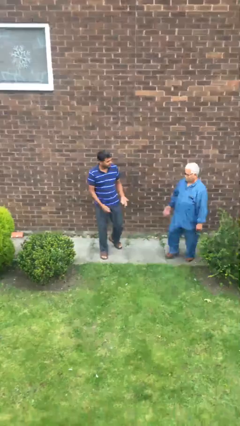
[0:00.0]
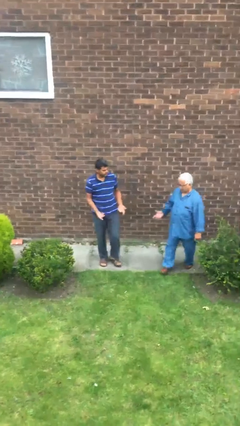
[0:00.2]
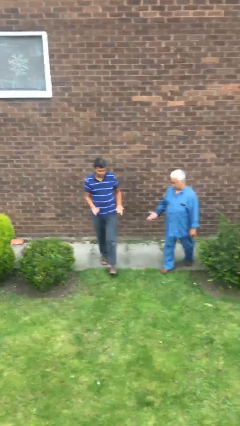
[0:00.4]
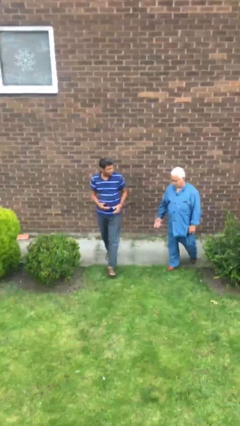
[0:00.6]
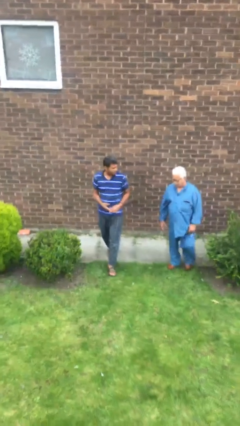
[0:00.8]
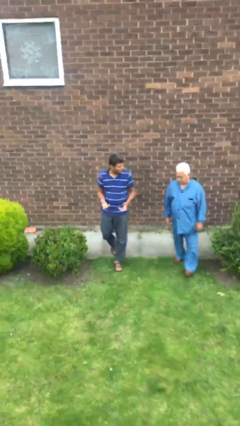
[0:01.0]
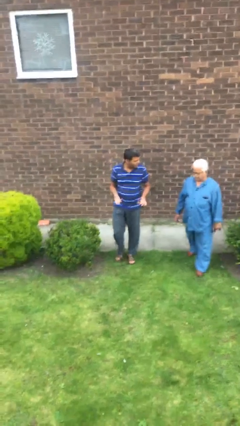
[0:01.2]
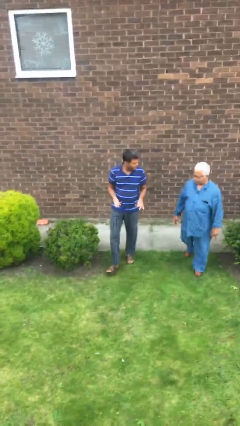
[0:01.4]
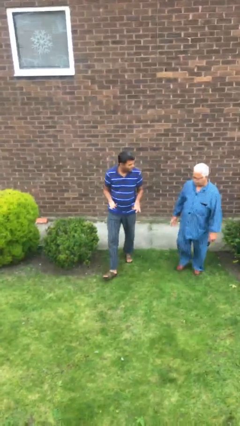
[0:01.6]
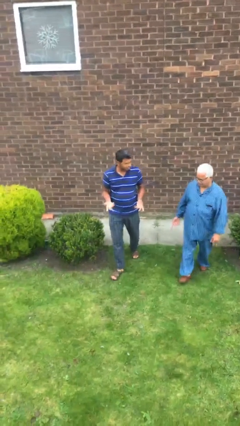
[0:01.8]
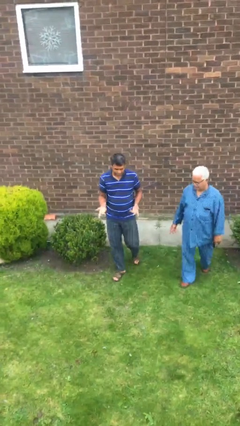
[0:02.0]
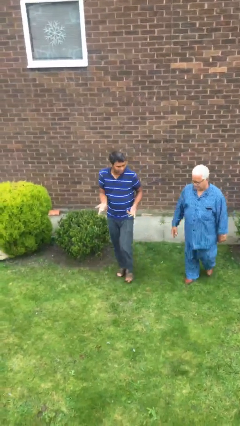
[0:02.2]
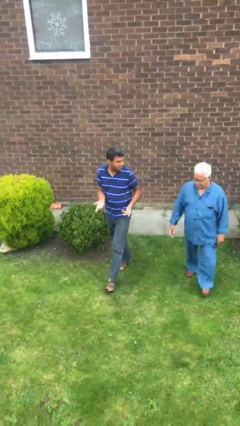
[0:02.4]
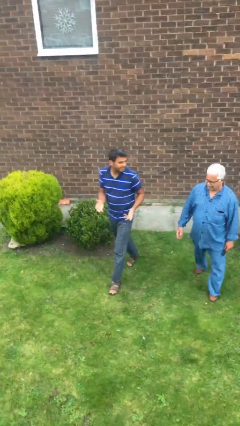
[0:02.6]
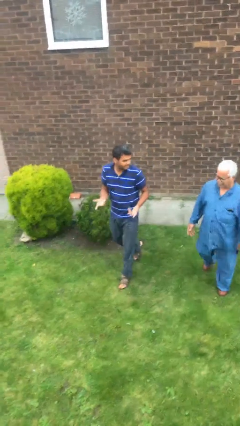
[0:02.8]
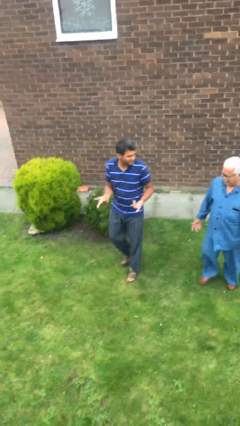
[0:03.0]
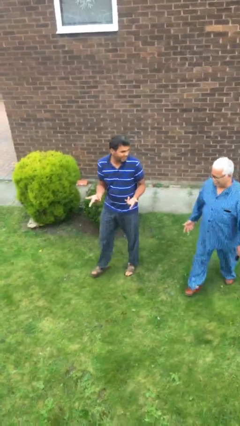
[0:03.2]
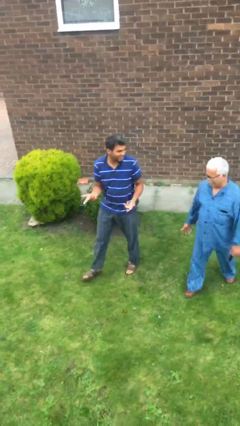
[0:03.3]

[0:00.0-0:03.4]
person talks to person

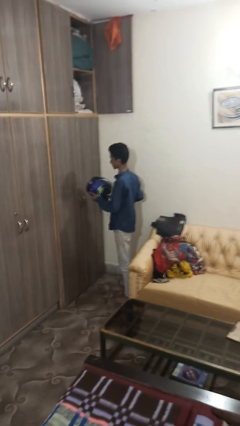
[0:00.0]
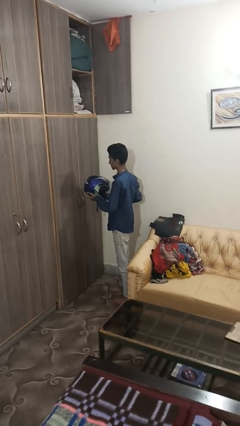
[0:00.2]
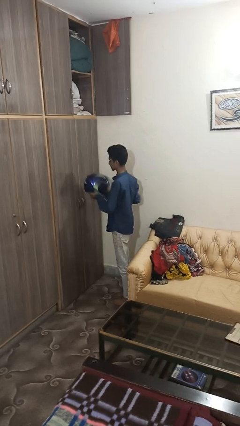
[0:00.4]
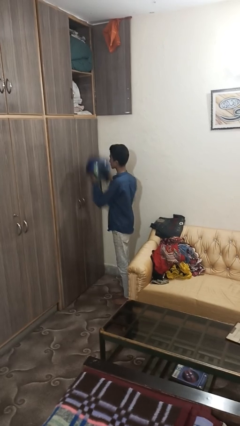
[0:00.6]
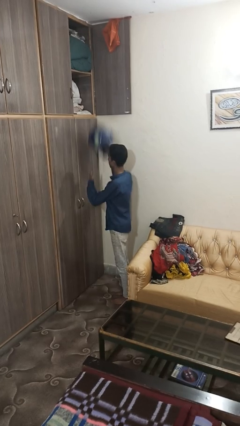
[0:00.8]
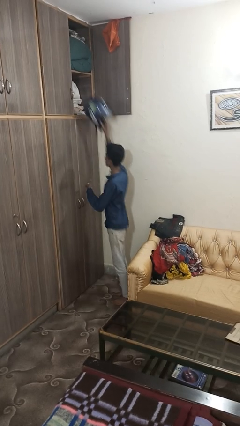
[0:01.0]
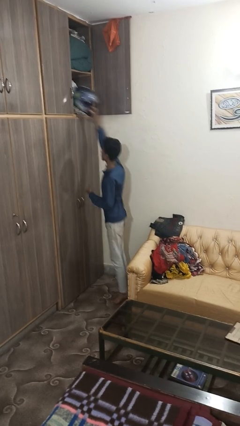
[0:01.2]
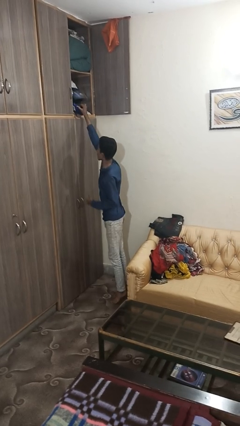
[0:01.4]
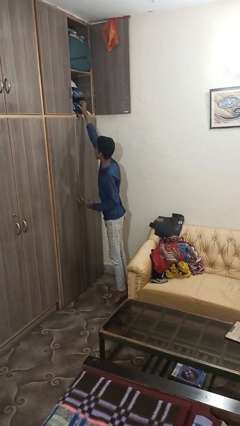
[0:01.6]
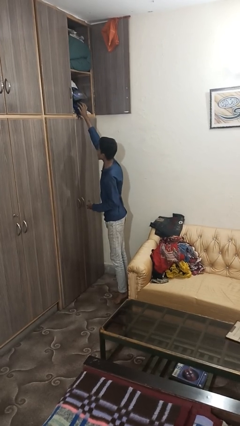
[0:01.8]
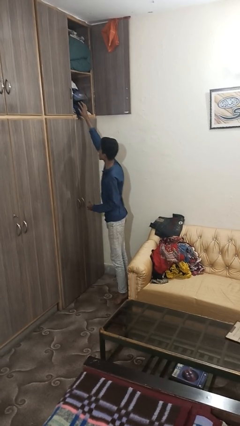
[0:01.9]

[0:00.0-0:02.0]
person puts down object on shelf

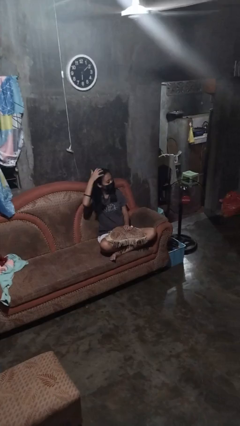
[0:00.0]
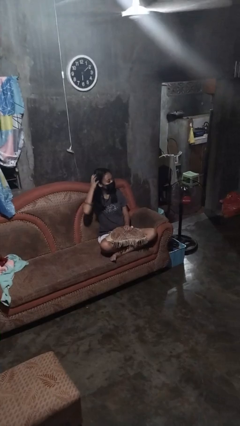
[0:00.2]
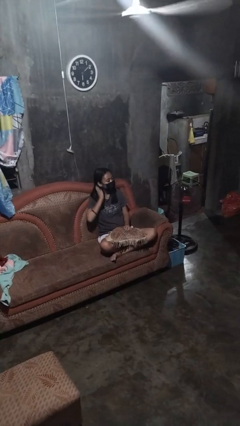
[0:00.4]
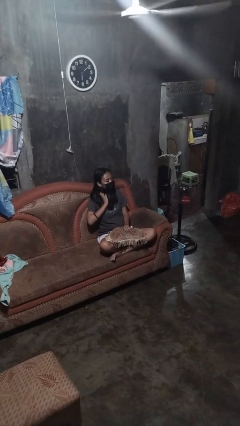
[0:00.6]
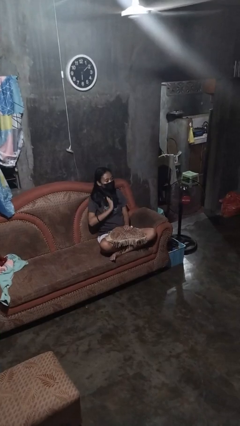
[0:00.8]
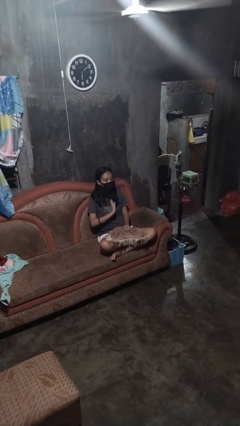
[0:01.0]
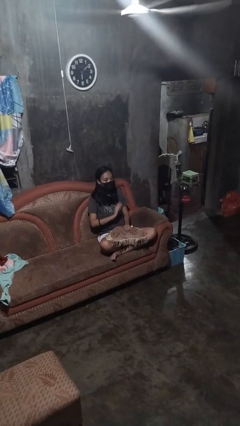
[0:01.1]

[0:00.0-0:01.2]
person strokes hair

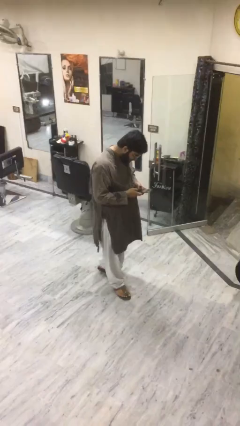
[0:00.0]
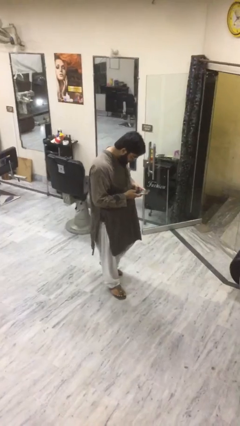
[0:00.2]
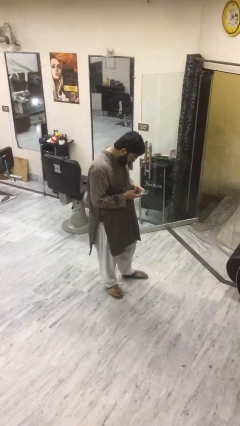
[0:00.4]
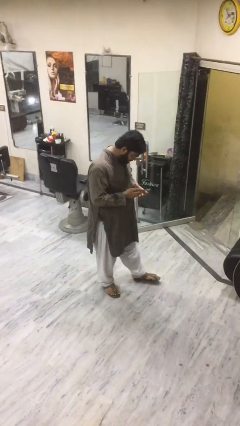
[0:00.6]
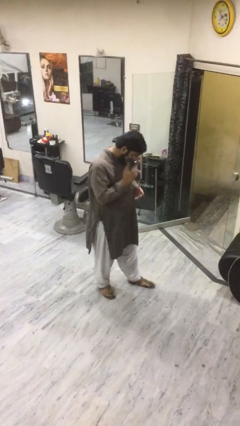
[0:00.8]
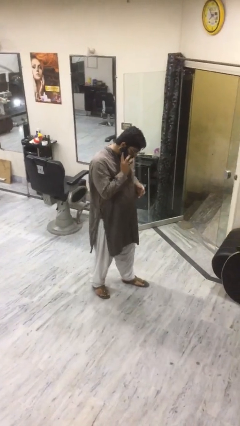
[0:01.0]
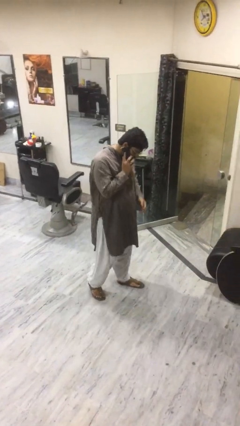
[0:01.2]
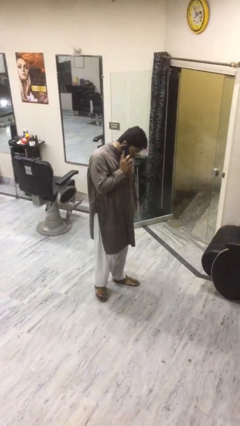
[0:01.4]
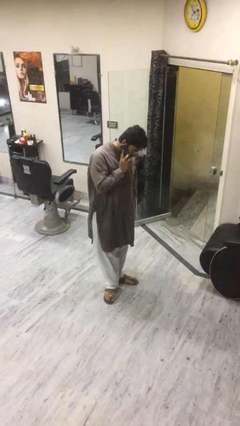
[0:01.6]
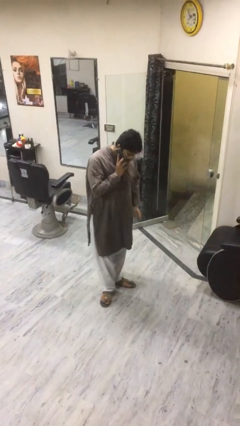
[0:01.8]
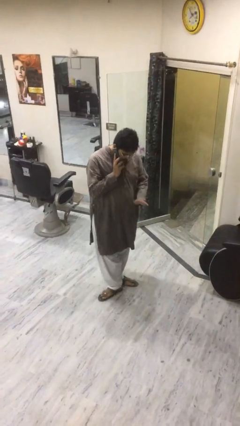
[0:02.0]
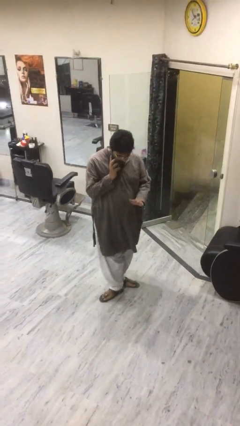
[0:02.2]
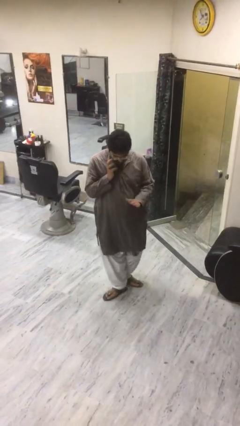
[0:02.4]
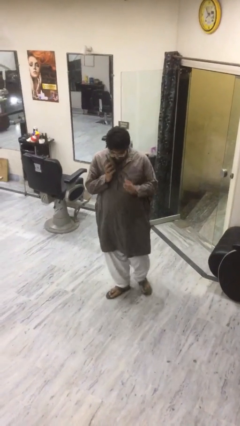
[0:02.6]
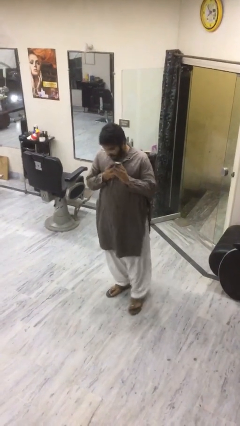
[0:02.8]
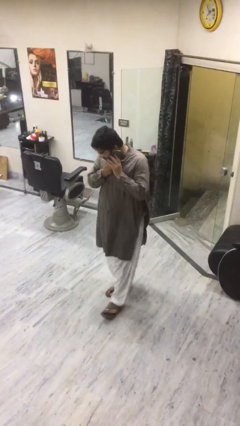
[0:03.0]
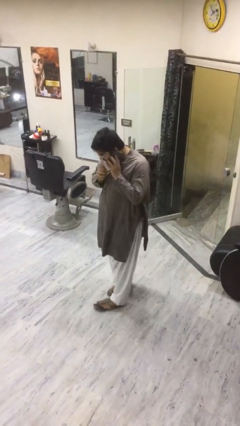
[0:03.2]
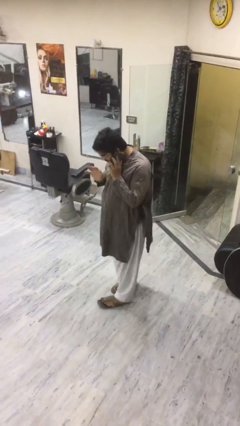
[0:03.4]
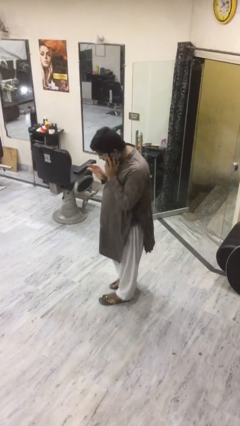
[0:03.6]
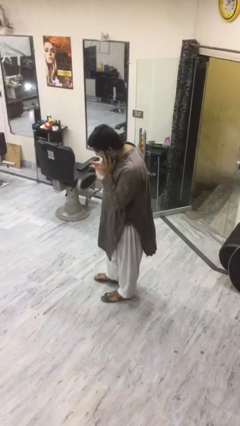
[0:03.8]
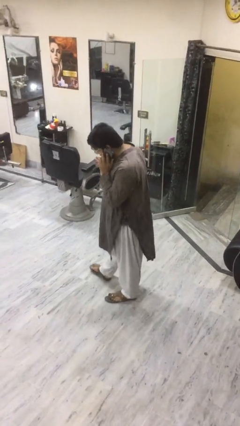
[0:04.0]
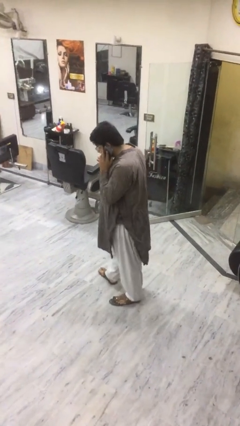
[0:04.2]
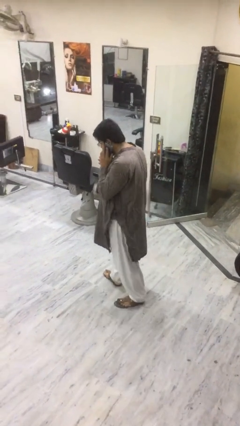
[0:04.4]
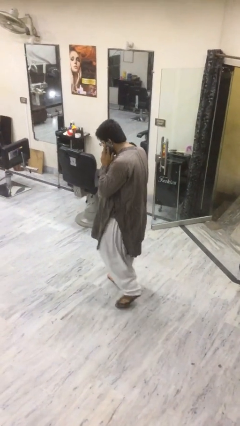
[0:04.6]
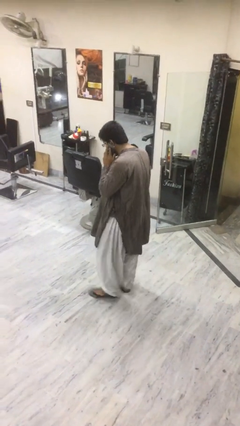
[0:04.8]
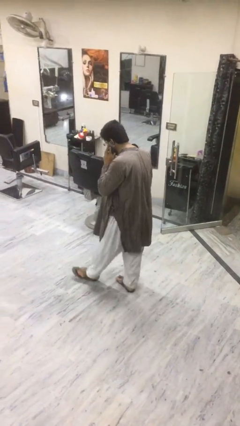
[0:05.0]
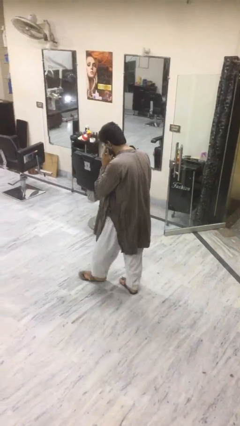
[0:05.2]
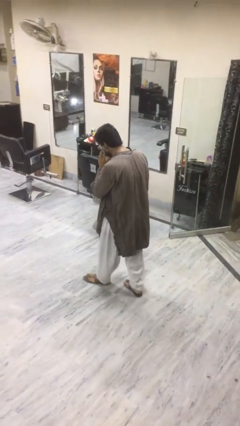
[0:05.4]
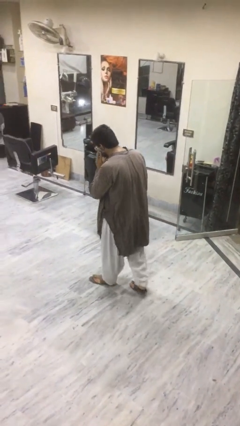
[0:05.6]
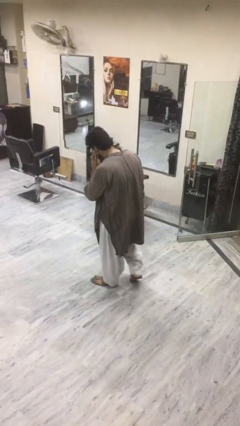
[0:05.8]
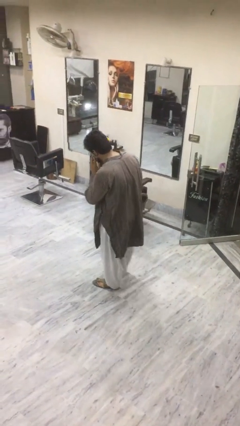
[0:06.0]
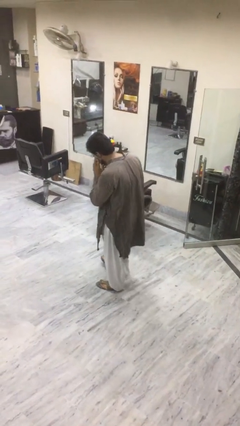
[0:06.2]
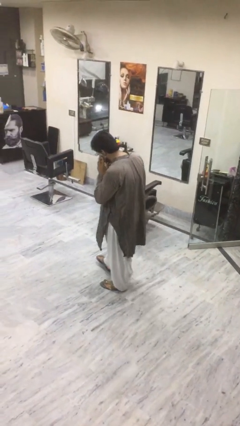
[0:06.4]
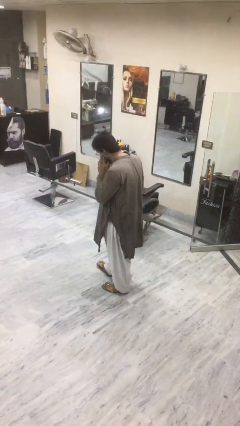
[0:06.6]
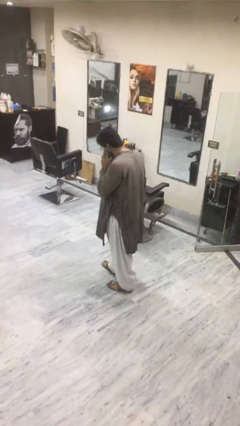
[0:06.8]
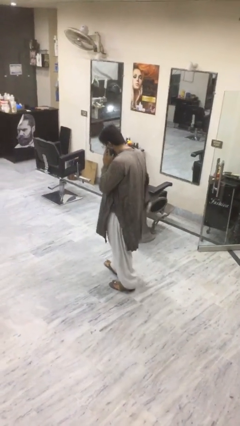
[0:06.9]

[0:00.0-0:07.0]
person talks on phone

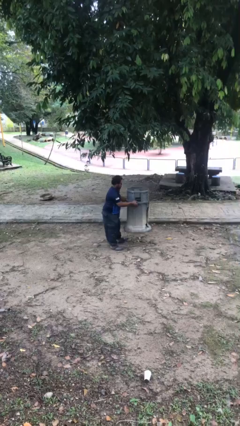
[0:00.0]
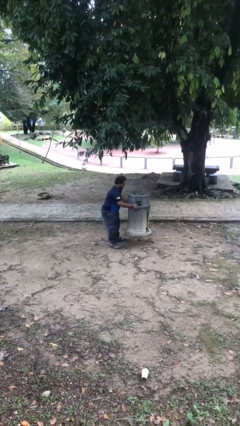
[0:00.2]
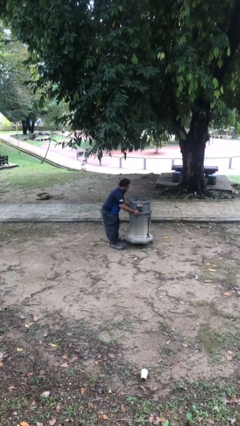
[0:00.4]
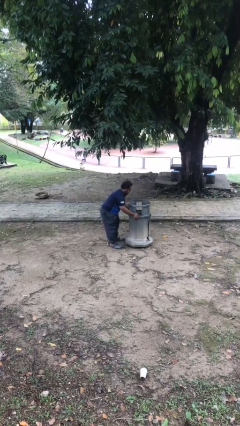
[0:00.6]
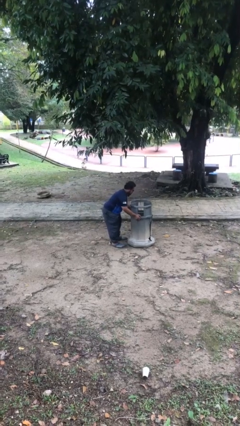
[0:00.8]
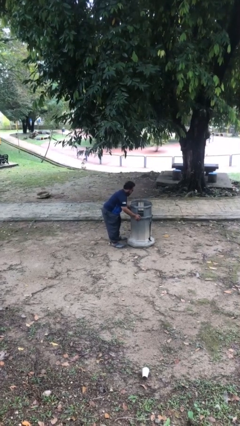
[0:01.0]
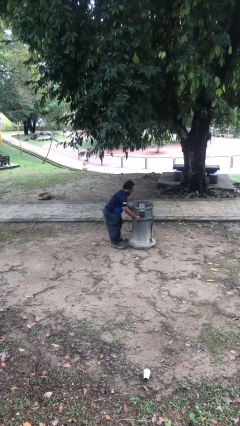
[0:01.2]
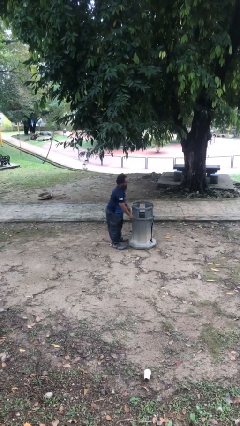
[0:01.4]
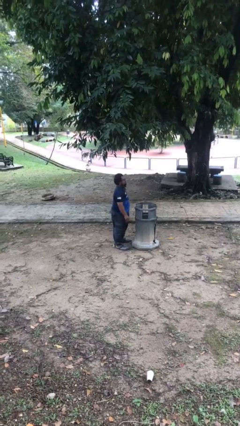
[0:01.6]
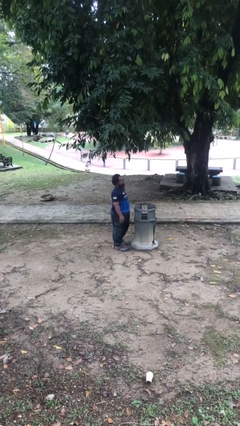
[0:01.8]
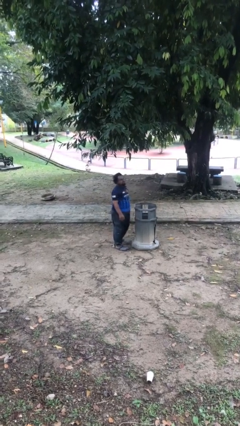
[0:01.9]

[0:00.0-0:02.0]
person puts down object on floor

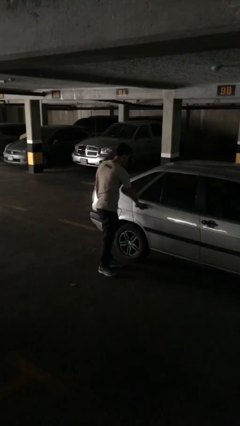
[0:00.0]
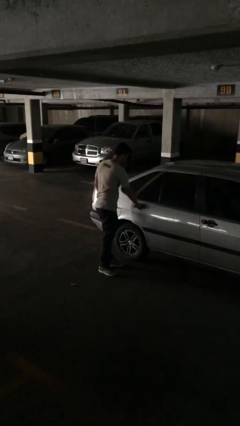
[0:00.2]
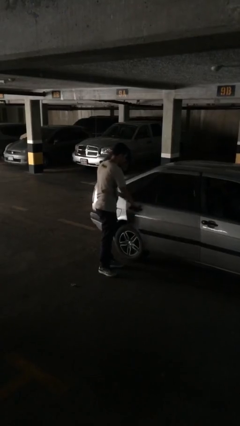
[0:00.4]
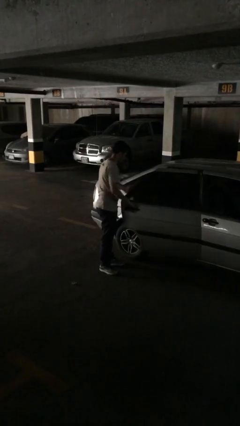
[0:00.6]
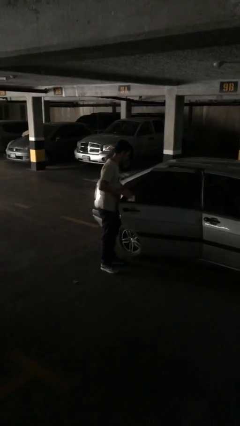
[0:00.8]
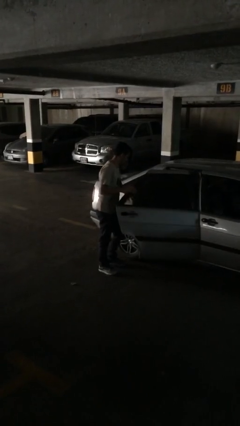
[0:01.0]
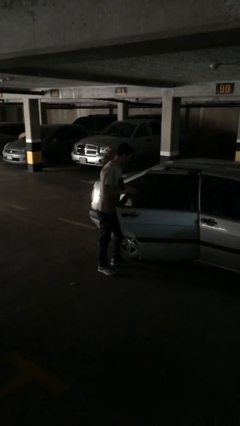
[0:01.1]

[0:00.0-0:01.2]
person opens car door

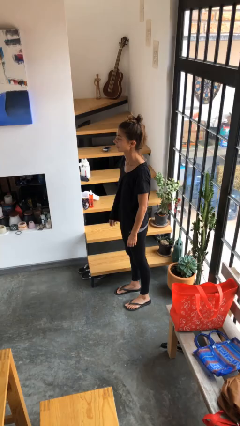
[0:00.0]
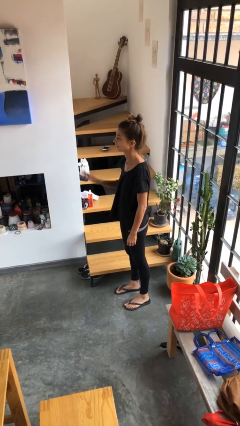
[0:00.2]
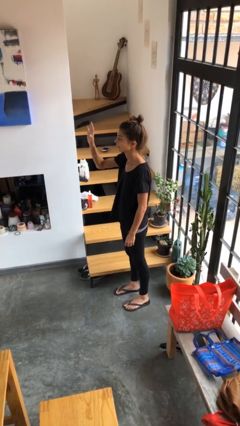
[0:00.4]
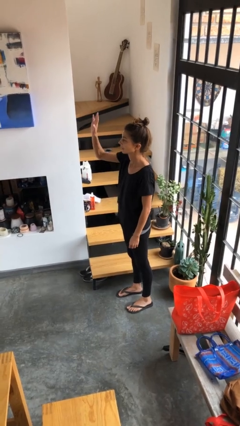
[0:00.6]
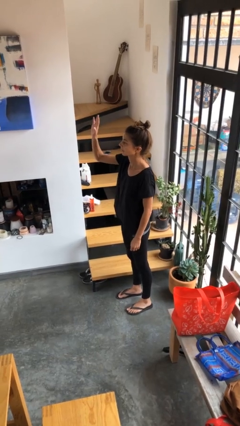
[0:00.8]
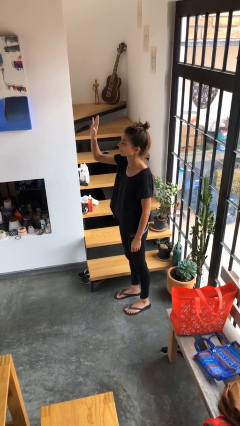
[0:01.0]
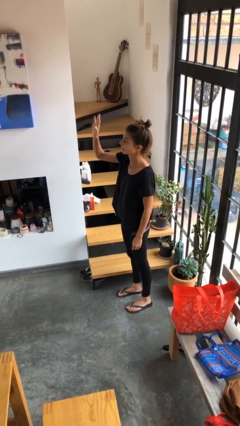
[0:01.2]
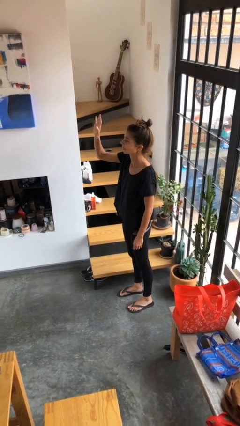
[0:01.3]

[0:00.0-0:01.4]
person gestures raise hand
